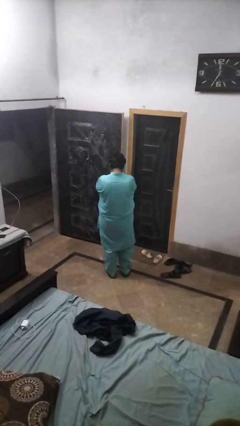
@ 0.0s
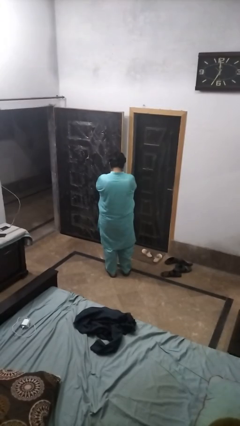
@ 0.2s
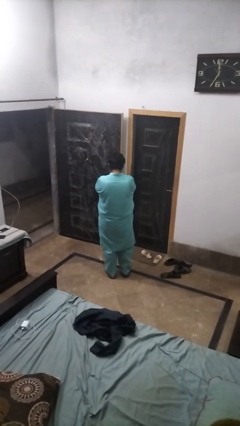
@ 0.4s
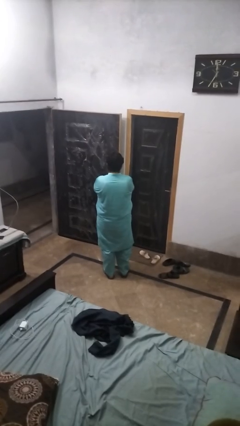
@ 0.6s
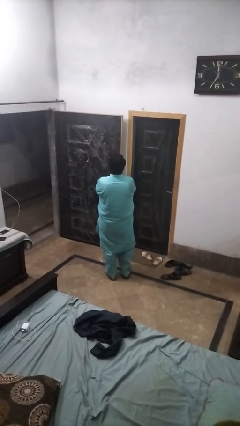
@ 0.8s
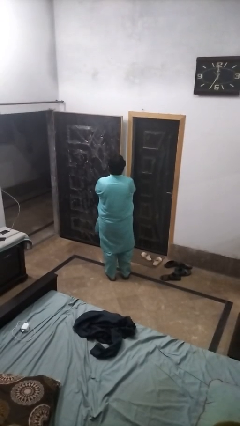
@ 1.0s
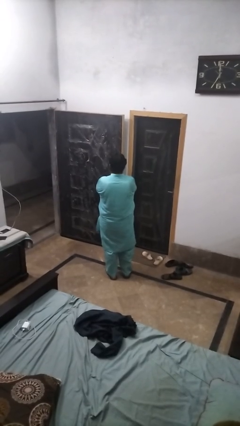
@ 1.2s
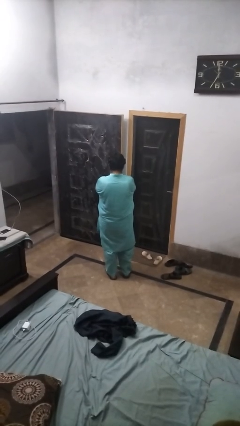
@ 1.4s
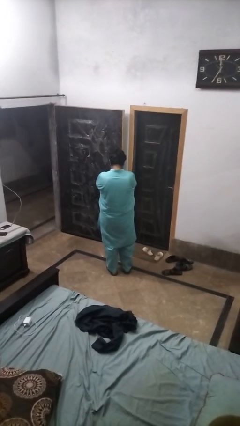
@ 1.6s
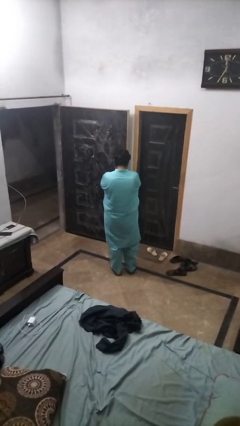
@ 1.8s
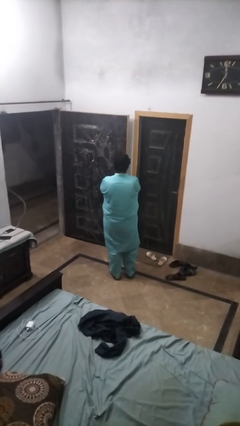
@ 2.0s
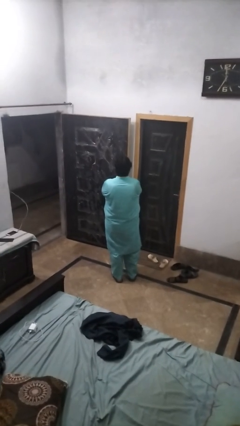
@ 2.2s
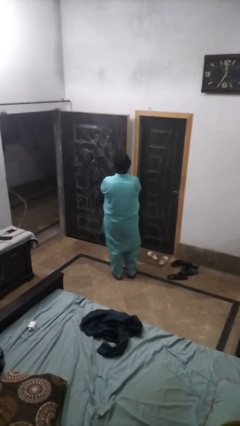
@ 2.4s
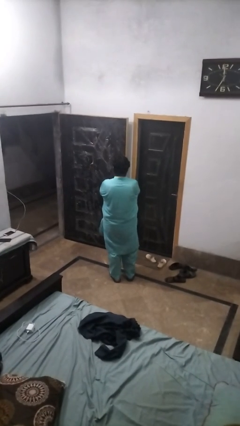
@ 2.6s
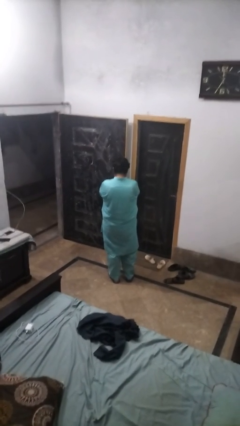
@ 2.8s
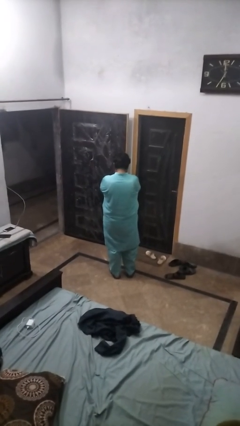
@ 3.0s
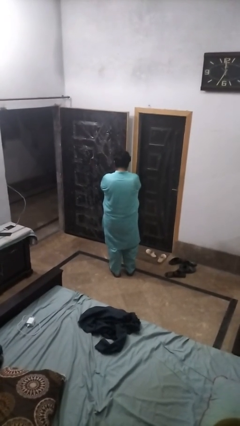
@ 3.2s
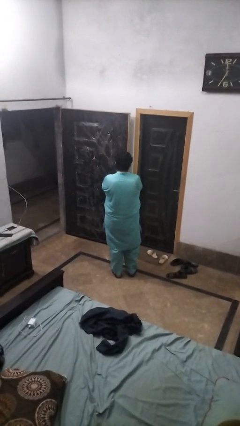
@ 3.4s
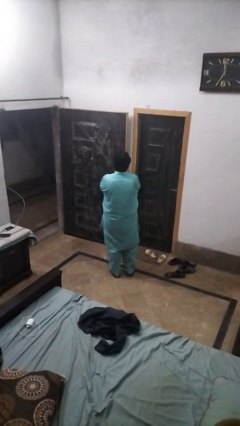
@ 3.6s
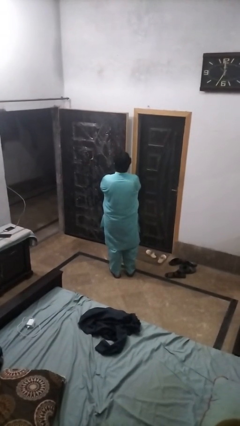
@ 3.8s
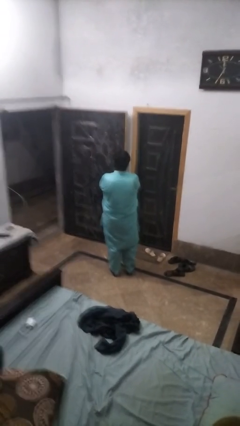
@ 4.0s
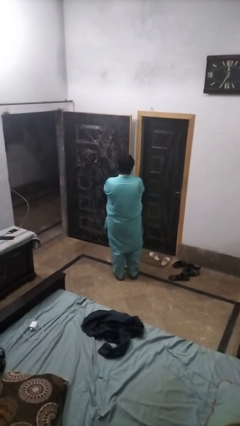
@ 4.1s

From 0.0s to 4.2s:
person nods head

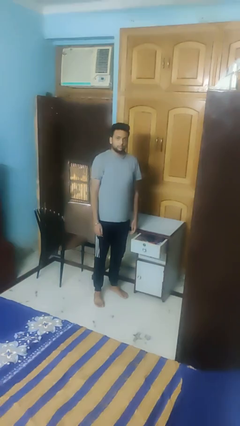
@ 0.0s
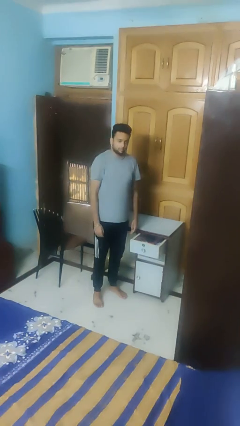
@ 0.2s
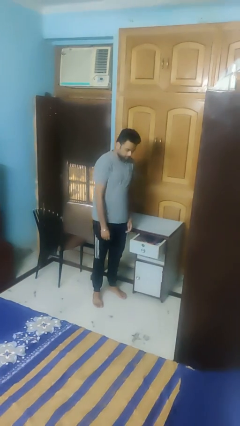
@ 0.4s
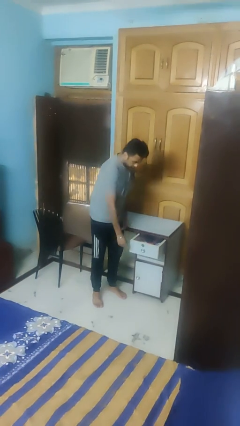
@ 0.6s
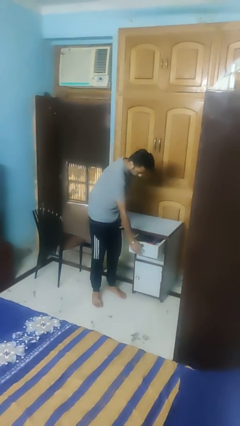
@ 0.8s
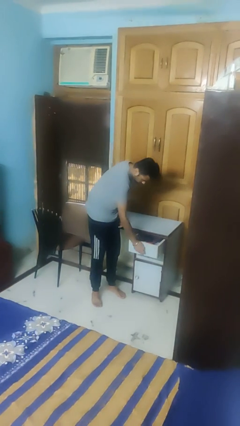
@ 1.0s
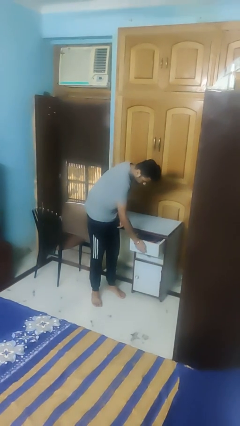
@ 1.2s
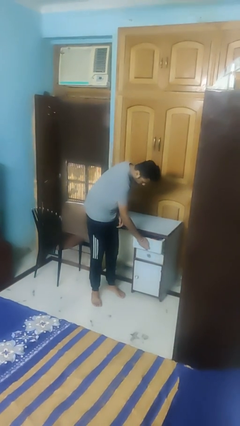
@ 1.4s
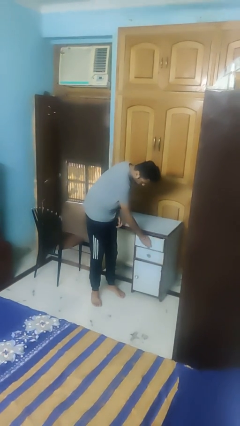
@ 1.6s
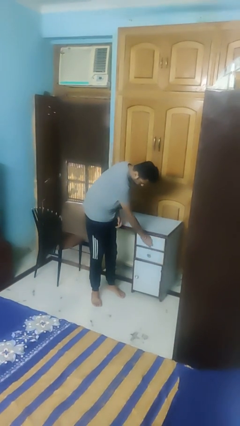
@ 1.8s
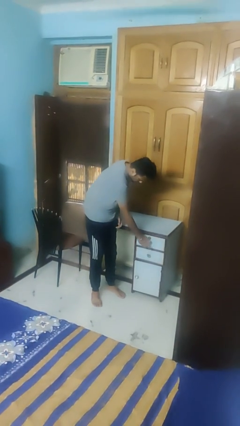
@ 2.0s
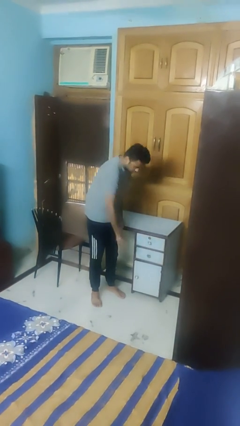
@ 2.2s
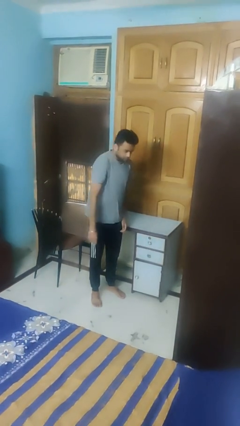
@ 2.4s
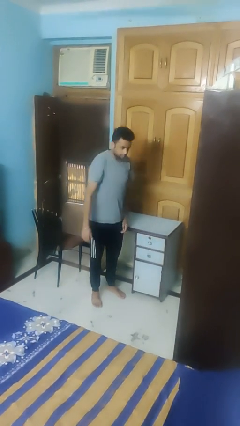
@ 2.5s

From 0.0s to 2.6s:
person closes dresser drawer

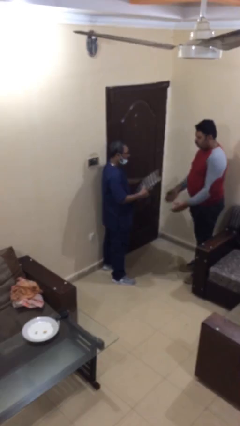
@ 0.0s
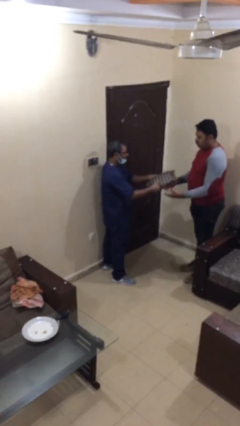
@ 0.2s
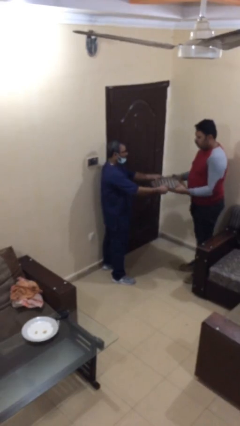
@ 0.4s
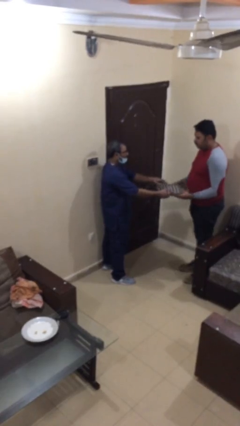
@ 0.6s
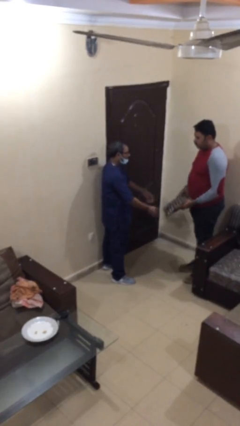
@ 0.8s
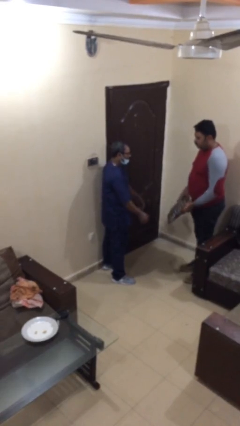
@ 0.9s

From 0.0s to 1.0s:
person transfers object to person

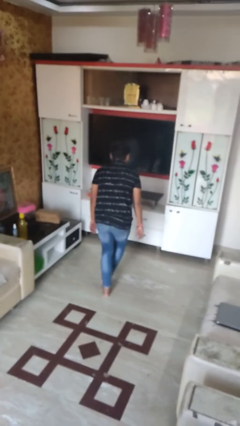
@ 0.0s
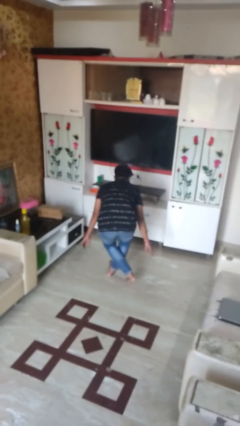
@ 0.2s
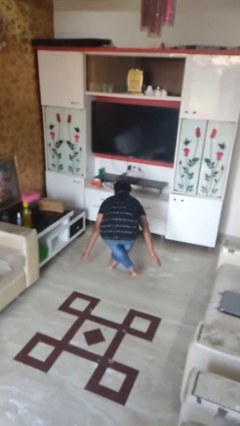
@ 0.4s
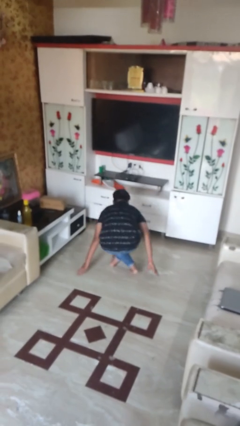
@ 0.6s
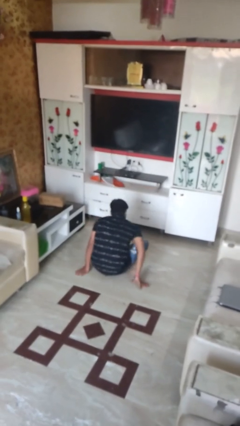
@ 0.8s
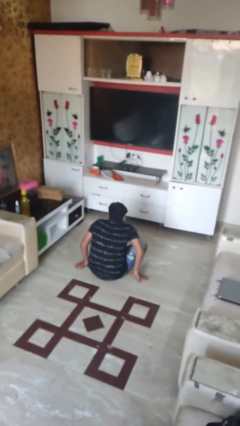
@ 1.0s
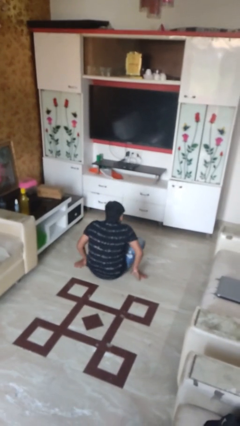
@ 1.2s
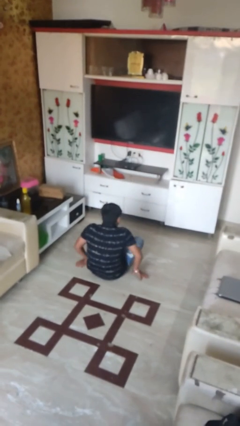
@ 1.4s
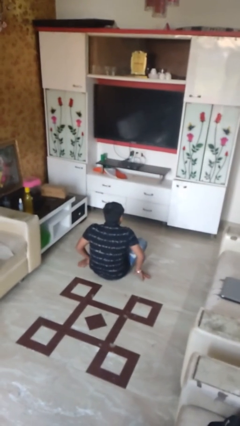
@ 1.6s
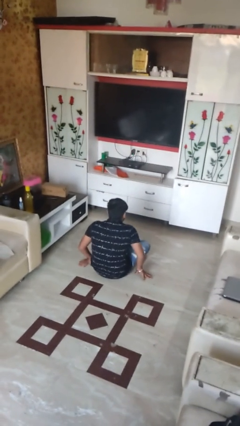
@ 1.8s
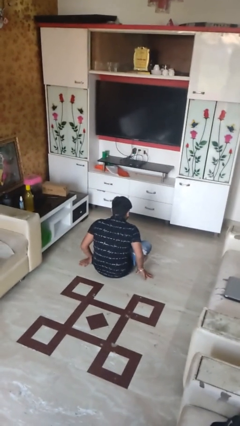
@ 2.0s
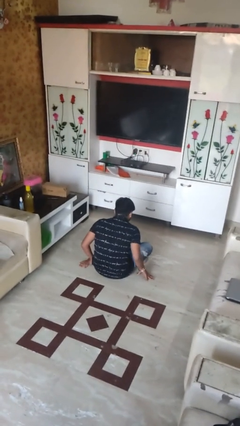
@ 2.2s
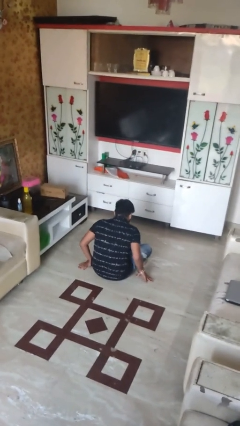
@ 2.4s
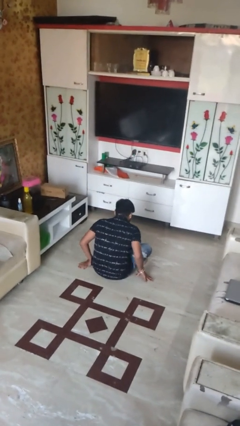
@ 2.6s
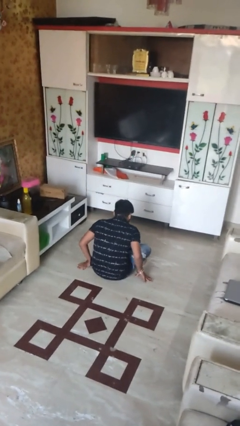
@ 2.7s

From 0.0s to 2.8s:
person sits crisscross

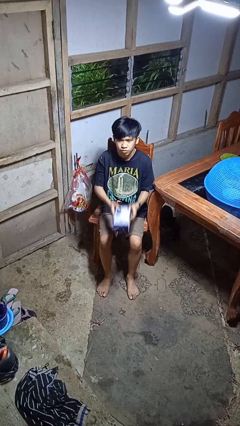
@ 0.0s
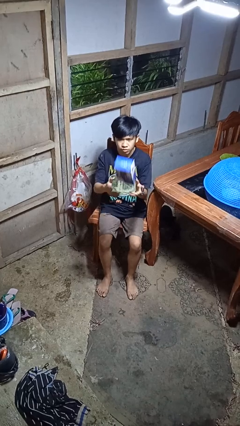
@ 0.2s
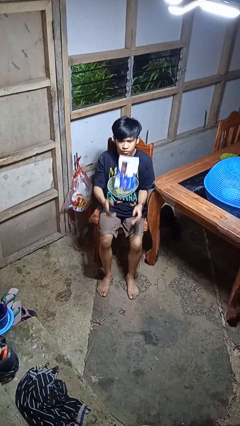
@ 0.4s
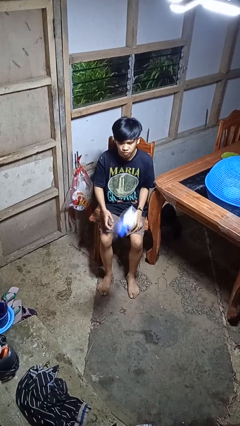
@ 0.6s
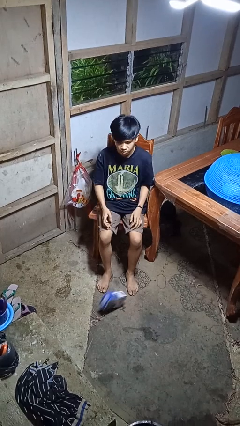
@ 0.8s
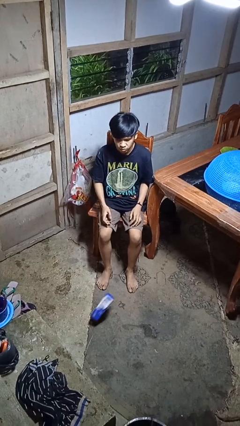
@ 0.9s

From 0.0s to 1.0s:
person throws object into air

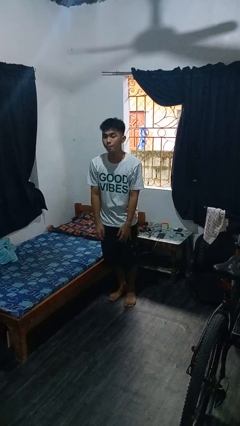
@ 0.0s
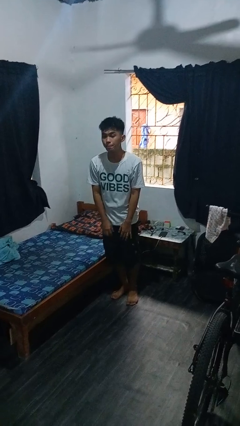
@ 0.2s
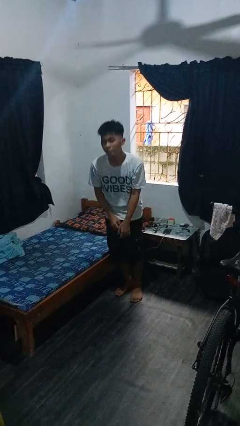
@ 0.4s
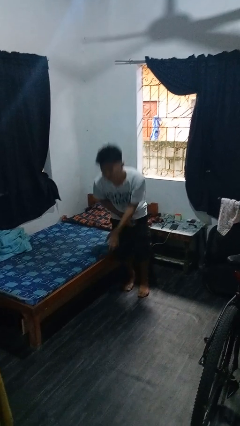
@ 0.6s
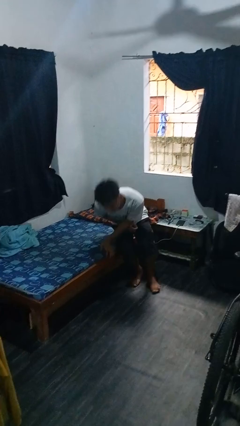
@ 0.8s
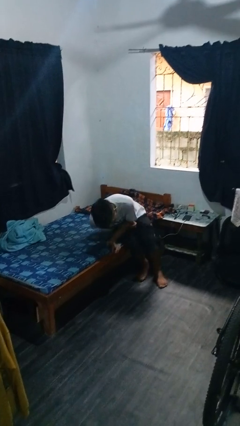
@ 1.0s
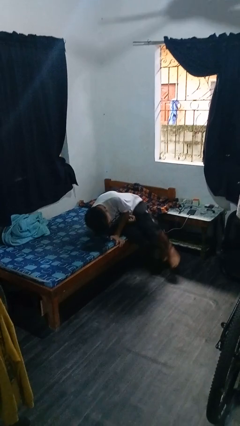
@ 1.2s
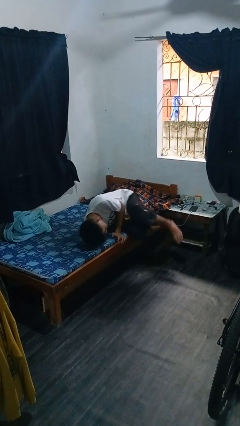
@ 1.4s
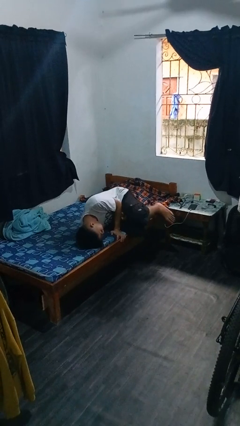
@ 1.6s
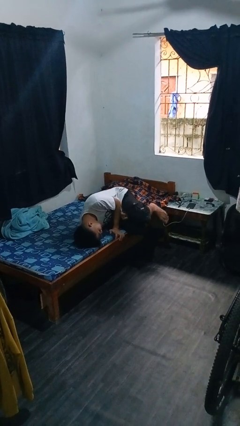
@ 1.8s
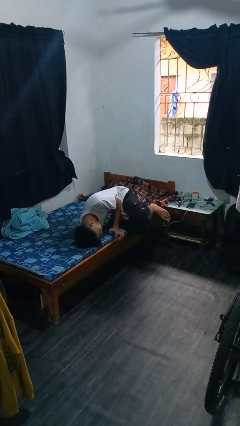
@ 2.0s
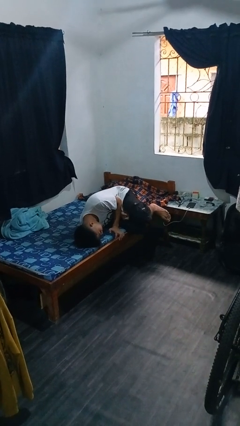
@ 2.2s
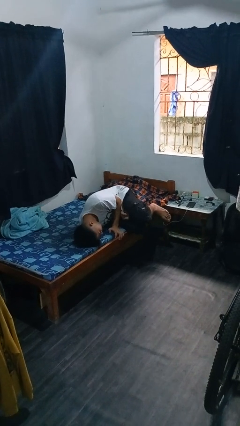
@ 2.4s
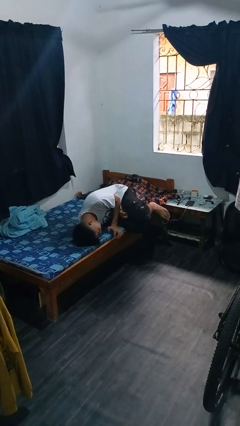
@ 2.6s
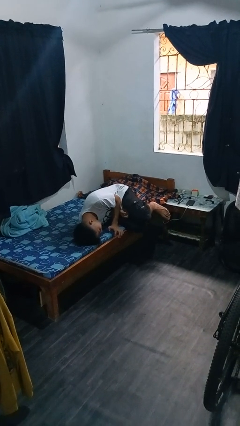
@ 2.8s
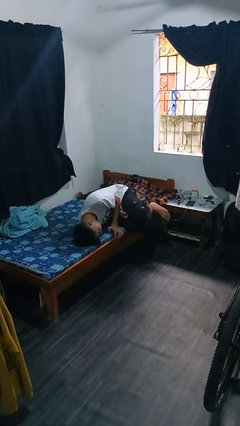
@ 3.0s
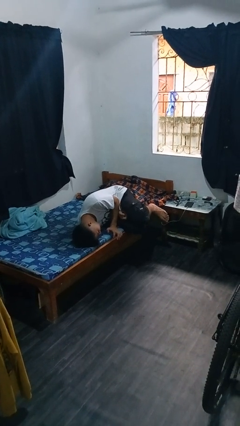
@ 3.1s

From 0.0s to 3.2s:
person lies down on bed

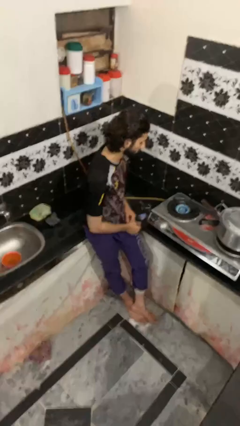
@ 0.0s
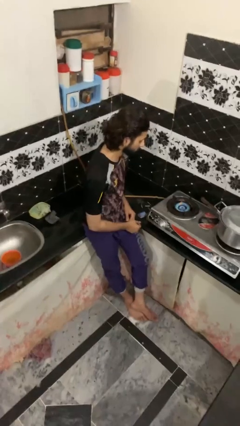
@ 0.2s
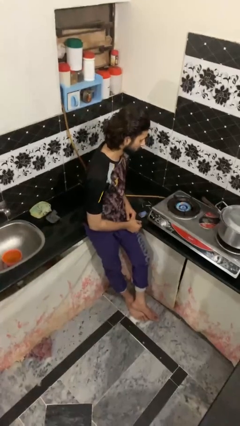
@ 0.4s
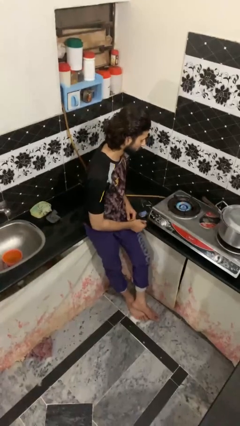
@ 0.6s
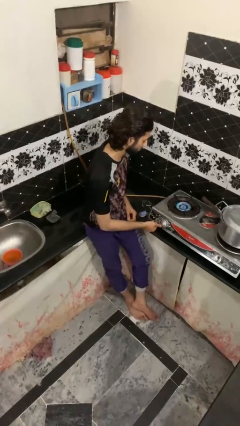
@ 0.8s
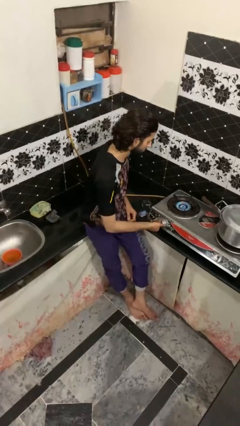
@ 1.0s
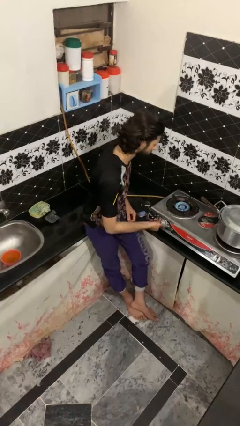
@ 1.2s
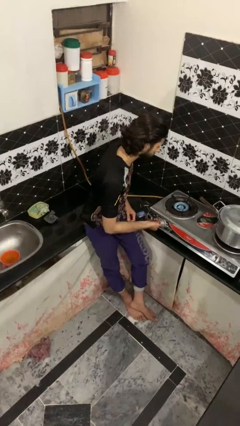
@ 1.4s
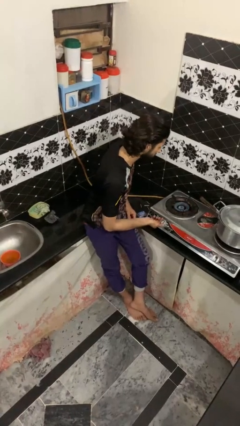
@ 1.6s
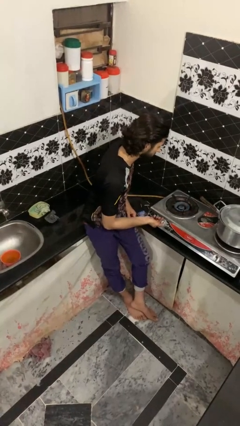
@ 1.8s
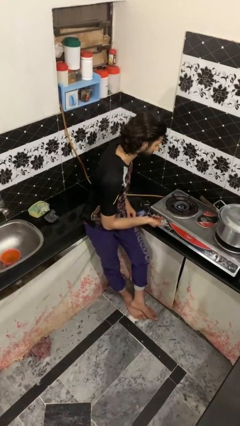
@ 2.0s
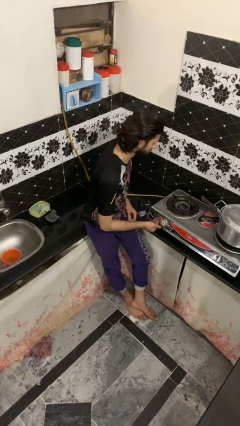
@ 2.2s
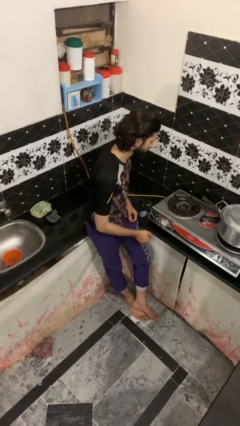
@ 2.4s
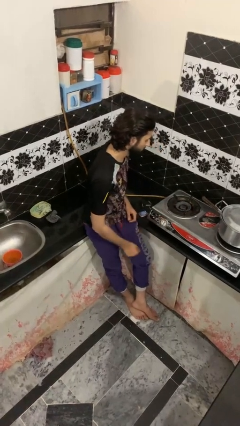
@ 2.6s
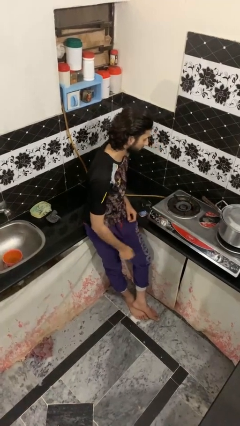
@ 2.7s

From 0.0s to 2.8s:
person turns off stovetop
